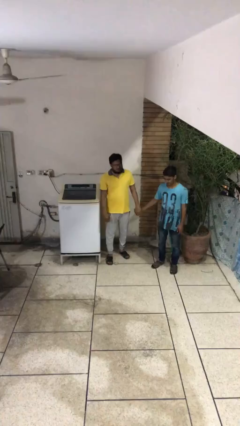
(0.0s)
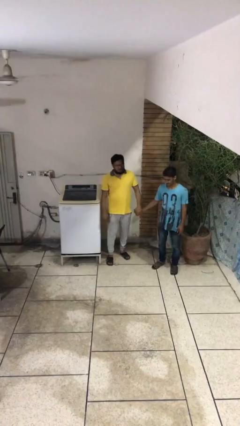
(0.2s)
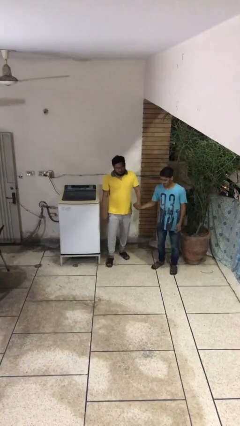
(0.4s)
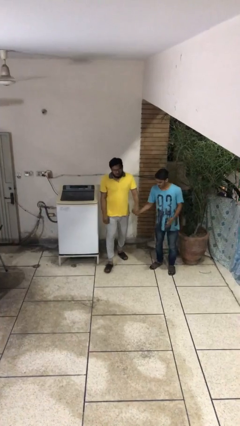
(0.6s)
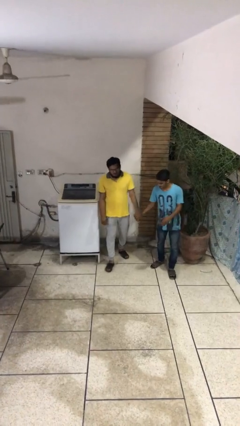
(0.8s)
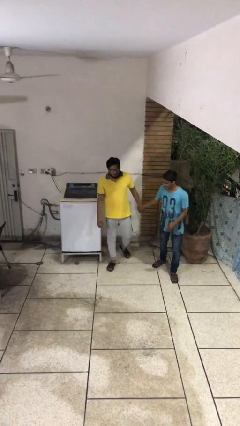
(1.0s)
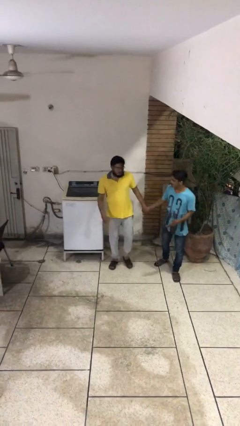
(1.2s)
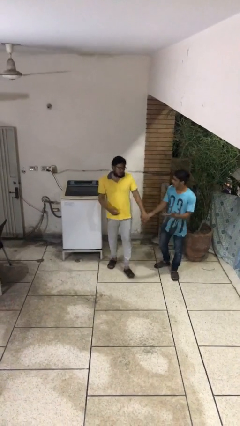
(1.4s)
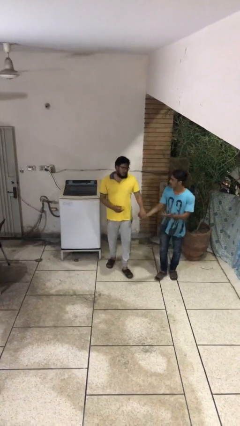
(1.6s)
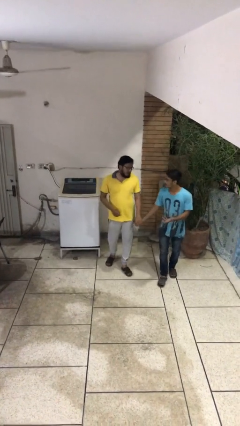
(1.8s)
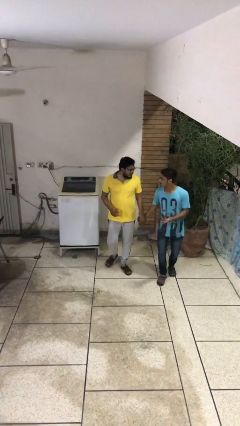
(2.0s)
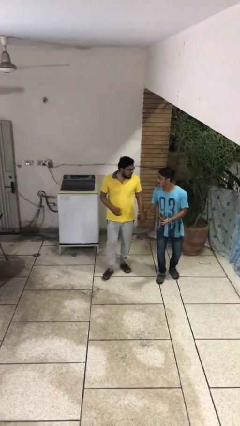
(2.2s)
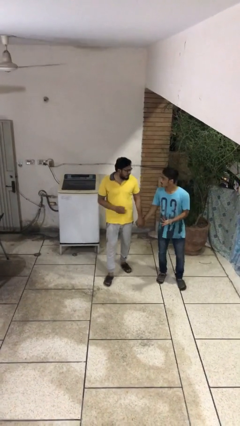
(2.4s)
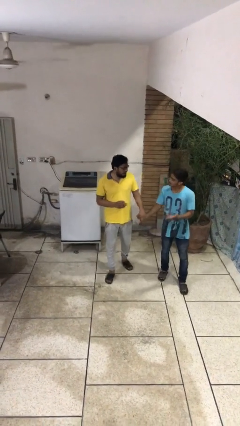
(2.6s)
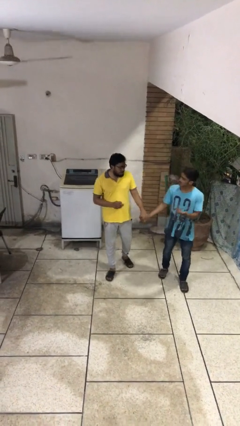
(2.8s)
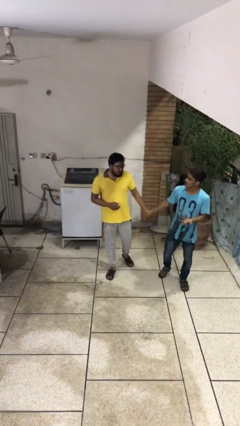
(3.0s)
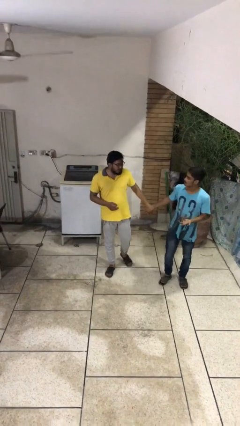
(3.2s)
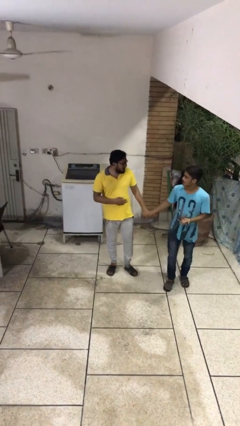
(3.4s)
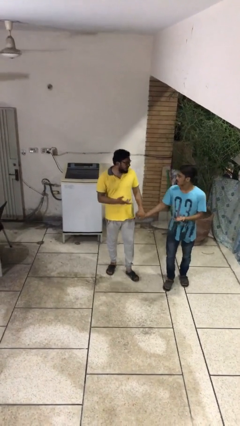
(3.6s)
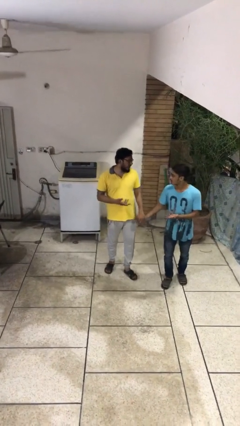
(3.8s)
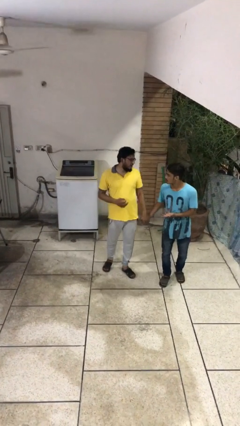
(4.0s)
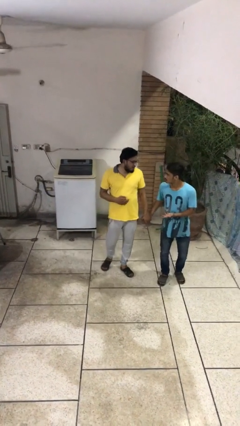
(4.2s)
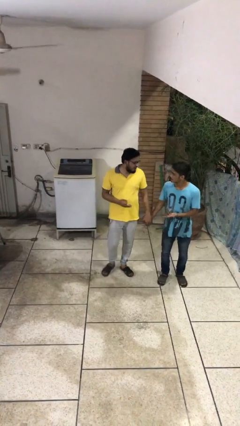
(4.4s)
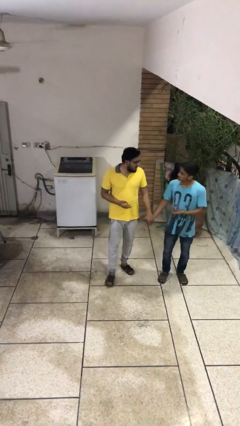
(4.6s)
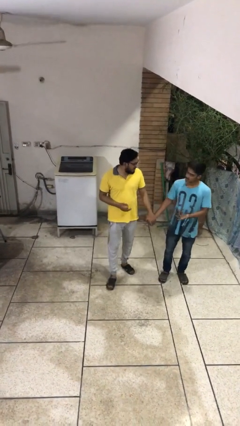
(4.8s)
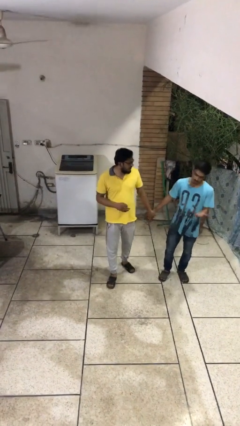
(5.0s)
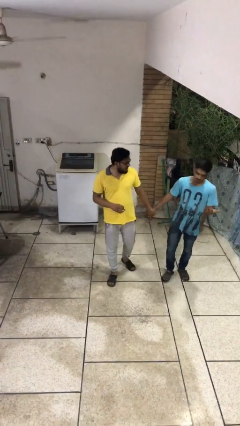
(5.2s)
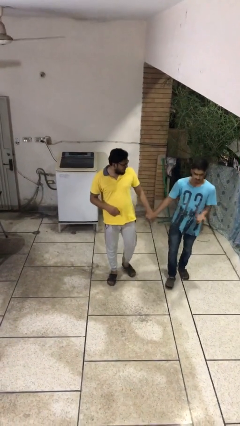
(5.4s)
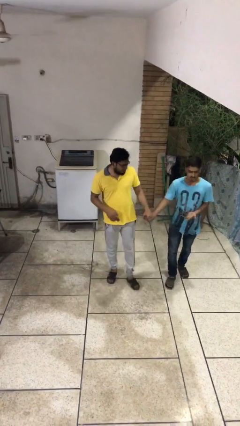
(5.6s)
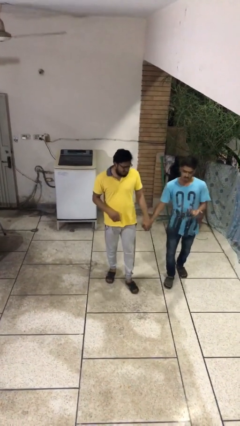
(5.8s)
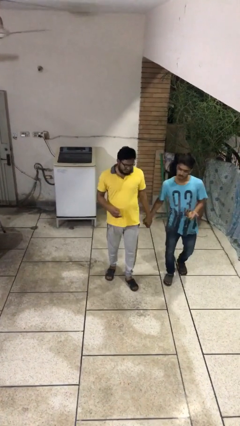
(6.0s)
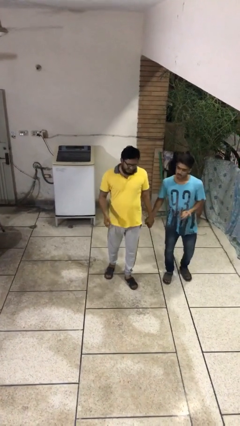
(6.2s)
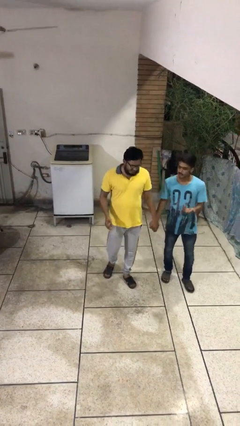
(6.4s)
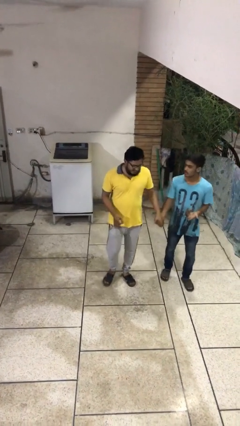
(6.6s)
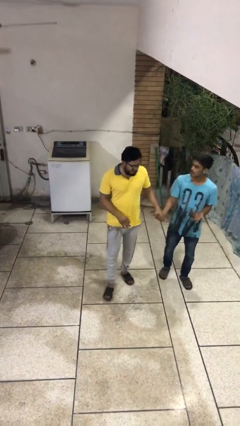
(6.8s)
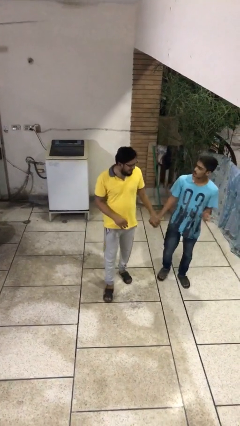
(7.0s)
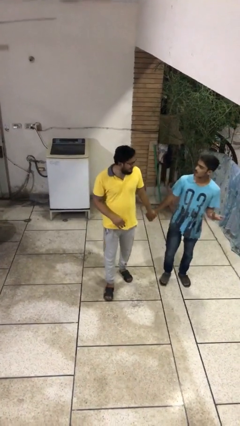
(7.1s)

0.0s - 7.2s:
person holds hand

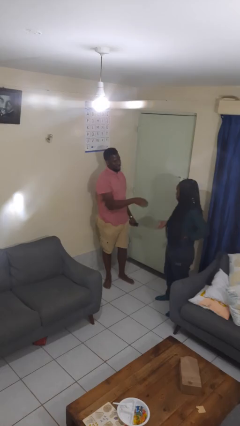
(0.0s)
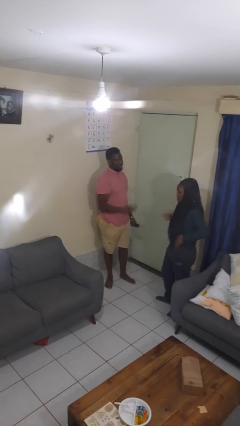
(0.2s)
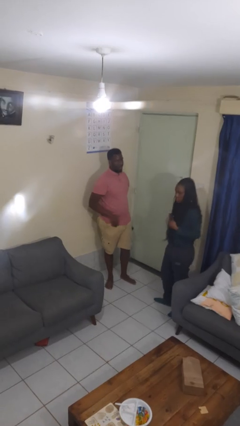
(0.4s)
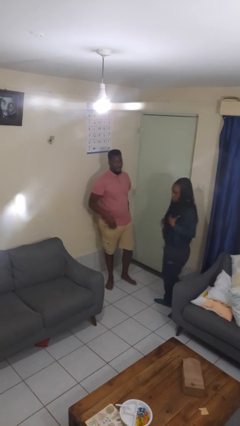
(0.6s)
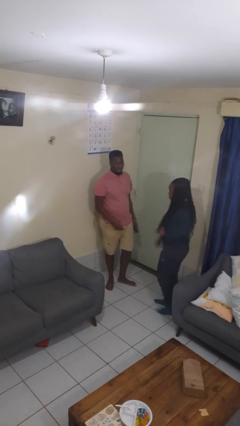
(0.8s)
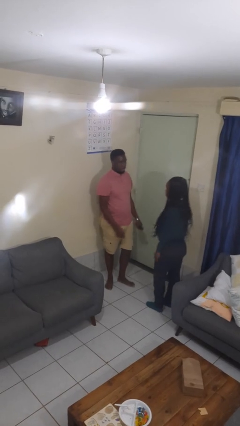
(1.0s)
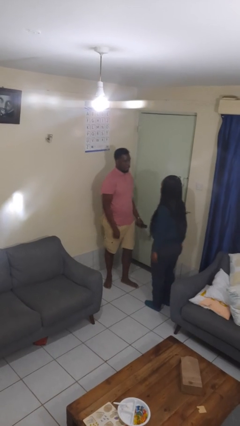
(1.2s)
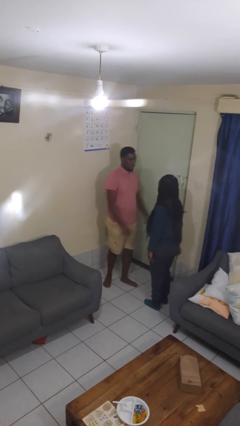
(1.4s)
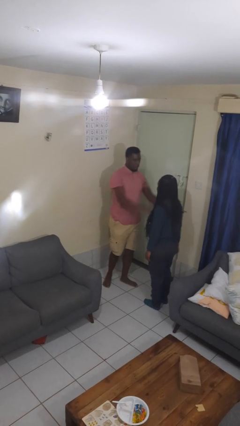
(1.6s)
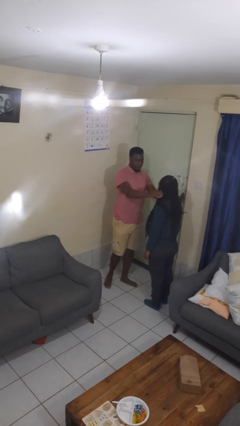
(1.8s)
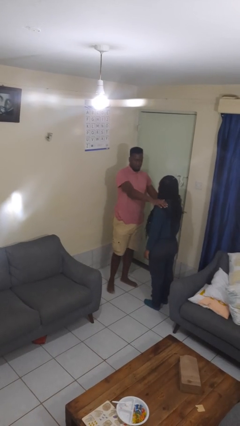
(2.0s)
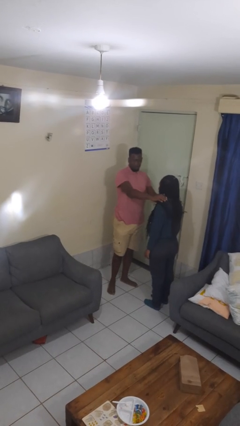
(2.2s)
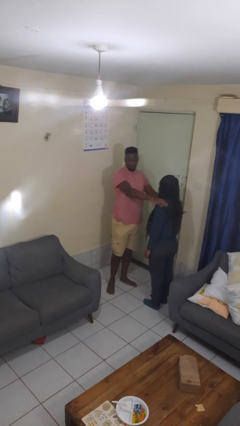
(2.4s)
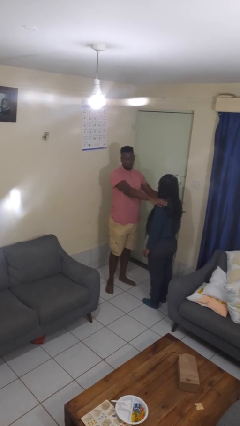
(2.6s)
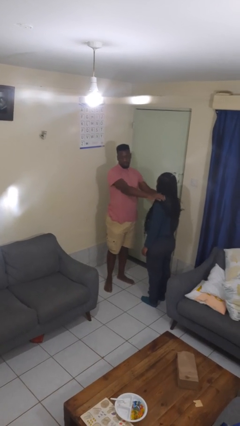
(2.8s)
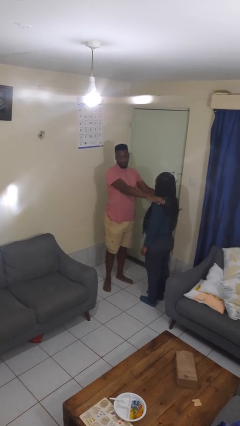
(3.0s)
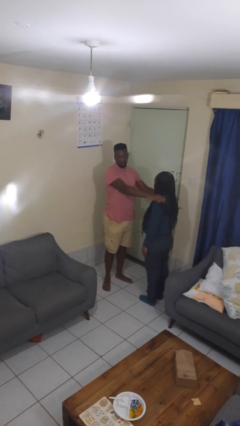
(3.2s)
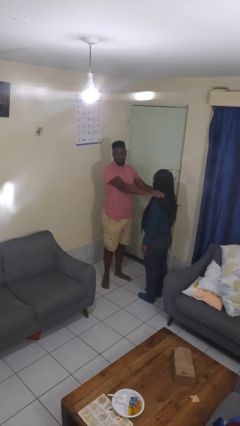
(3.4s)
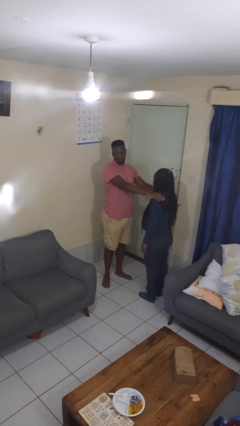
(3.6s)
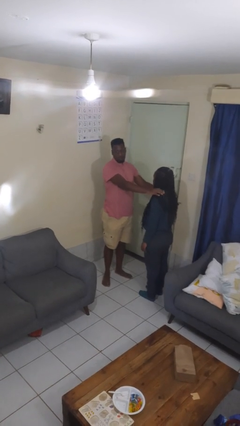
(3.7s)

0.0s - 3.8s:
person pounds shoulders of person

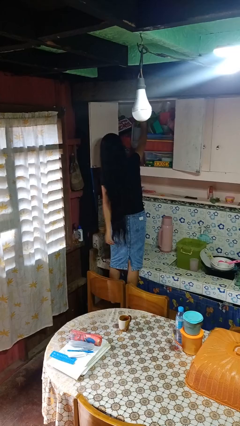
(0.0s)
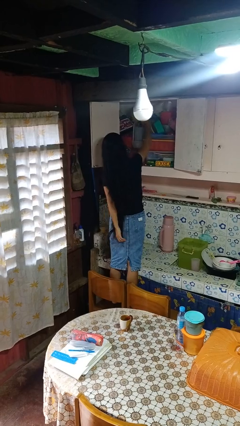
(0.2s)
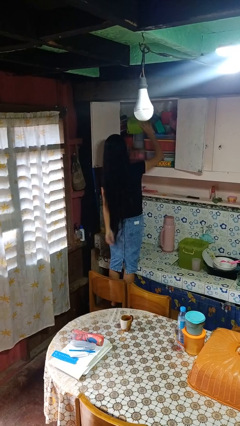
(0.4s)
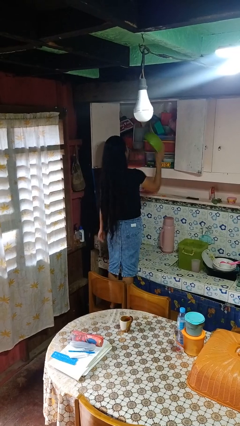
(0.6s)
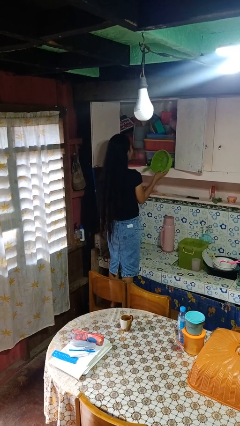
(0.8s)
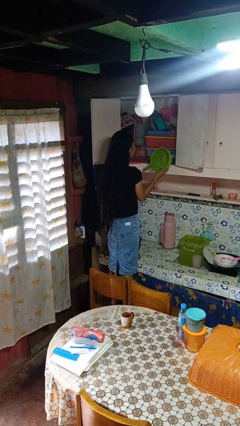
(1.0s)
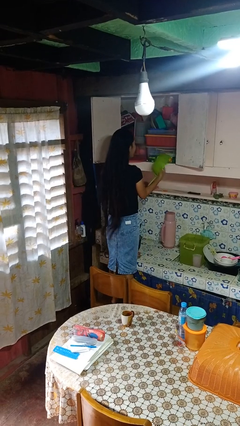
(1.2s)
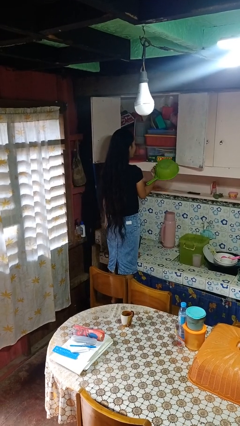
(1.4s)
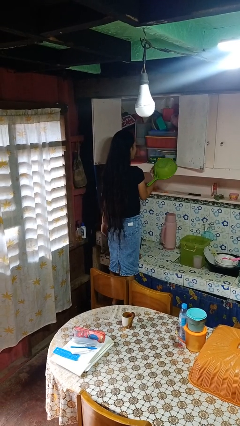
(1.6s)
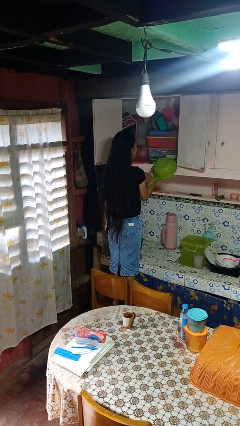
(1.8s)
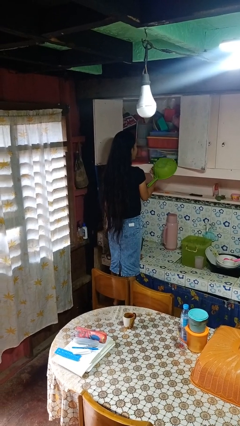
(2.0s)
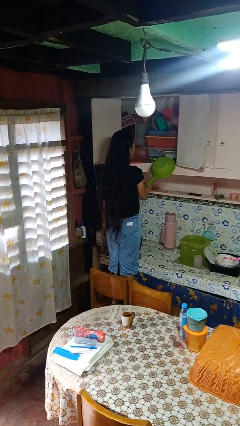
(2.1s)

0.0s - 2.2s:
person takes object from cabinet

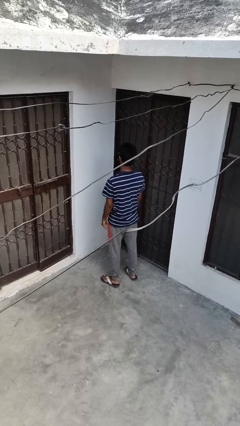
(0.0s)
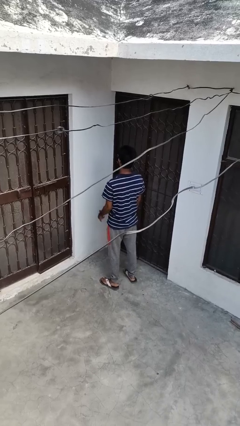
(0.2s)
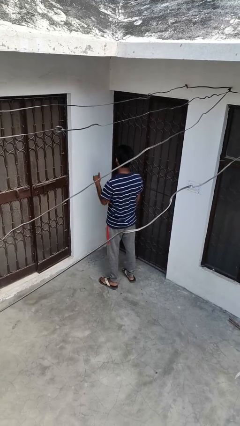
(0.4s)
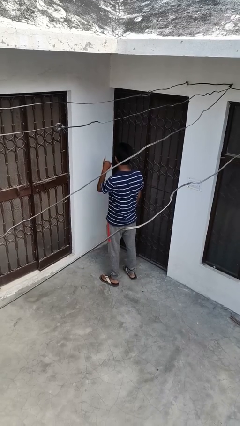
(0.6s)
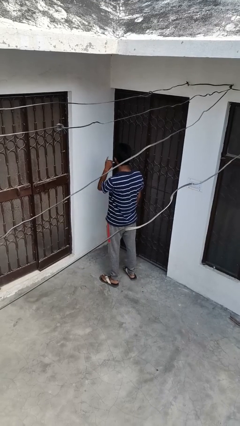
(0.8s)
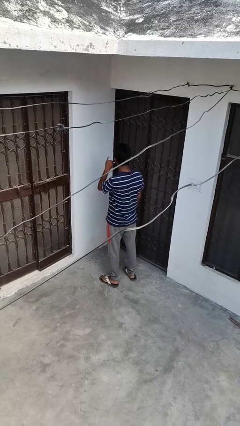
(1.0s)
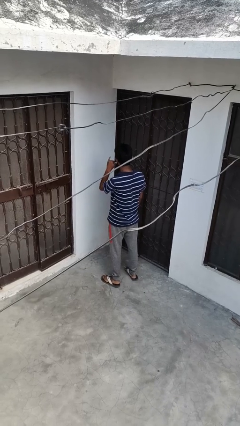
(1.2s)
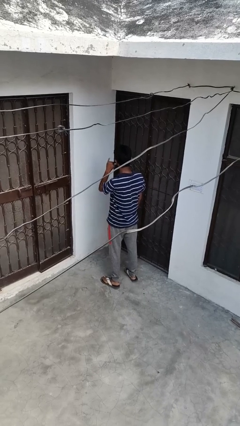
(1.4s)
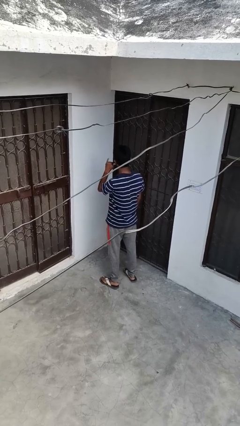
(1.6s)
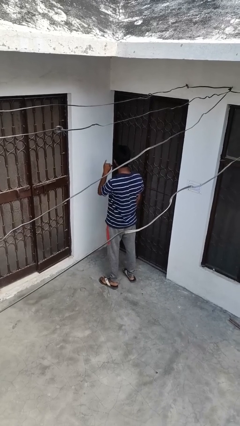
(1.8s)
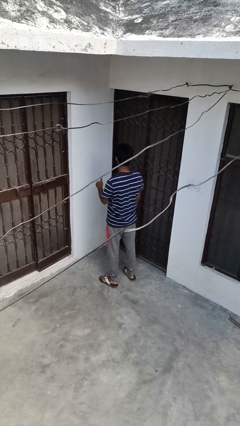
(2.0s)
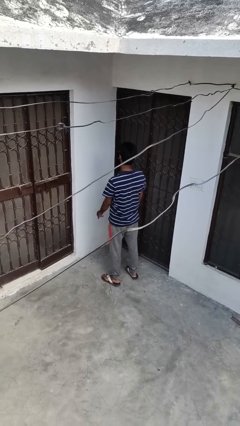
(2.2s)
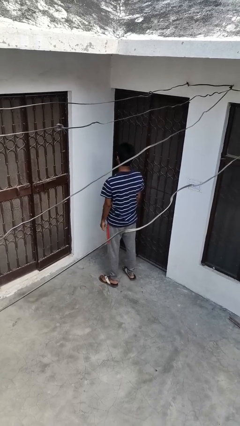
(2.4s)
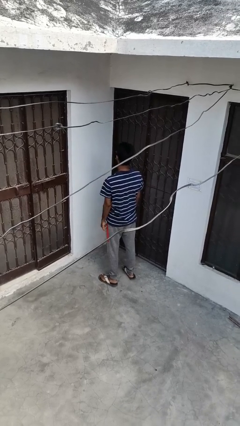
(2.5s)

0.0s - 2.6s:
person gestures call me

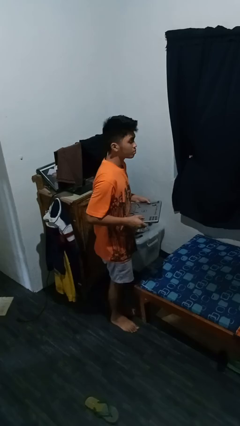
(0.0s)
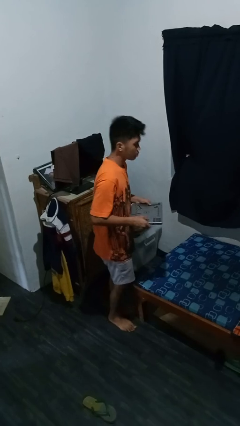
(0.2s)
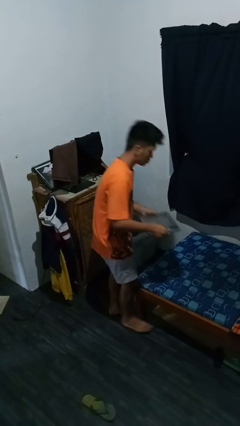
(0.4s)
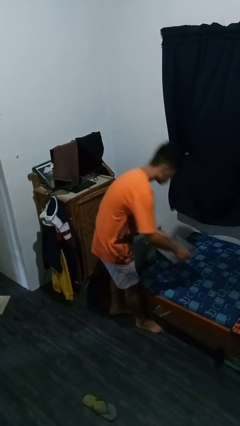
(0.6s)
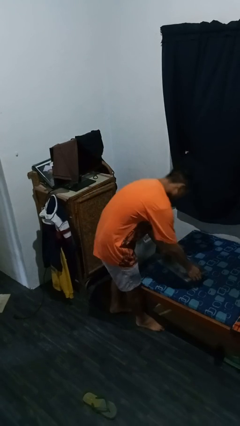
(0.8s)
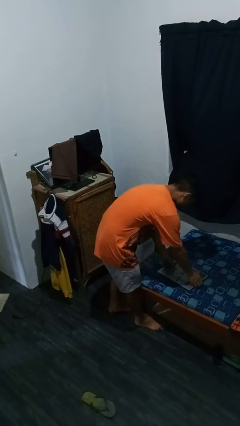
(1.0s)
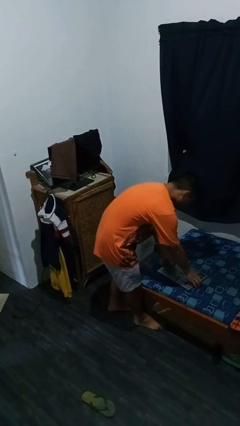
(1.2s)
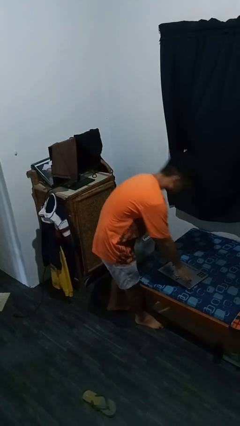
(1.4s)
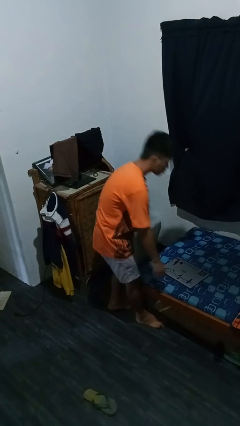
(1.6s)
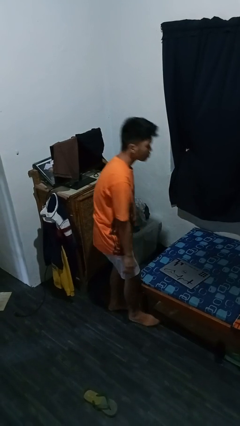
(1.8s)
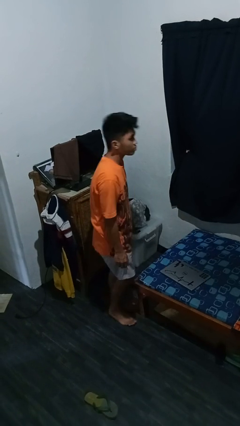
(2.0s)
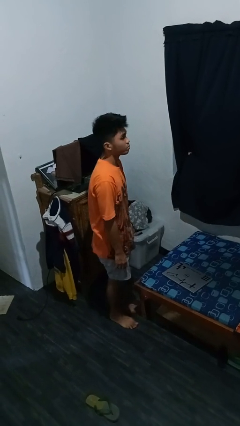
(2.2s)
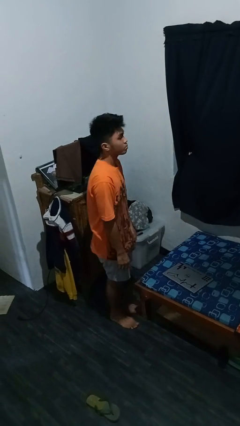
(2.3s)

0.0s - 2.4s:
person puts down object on bed
